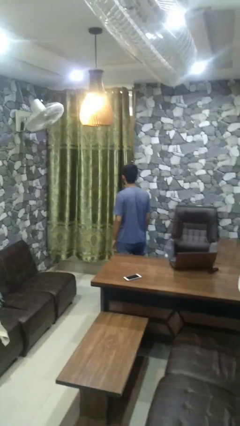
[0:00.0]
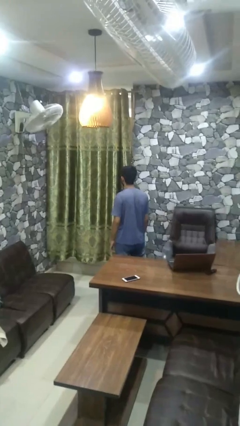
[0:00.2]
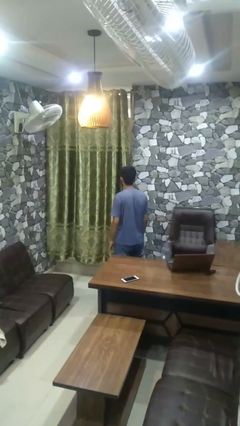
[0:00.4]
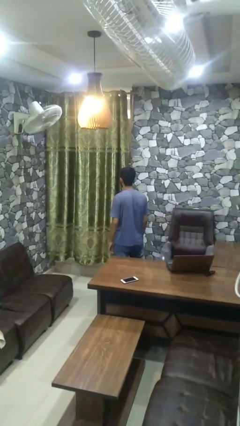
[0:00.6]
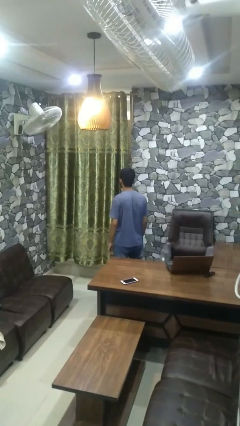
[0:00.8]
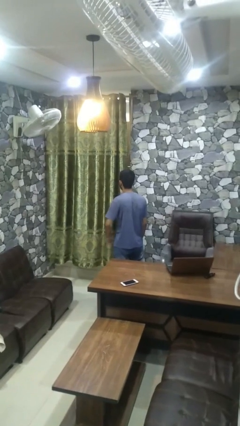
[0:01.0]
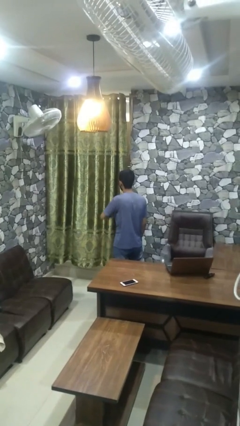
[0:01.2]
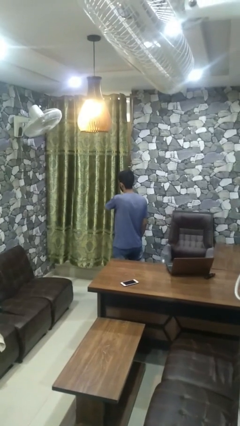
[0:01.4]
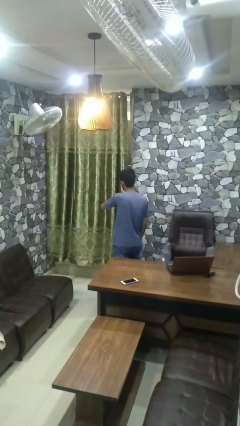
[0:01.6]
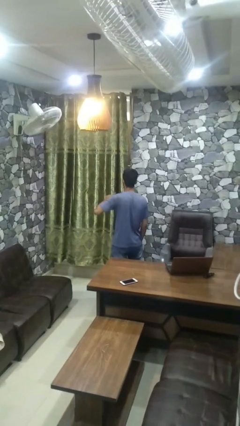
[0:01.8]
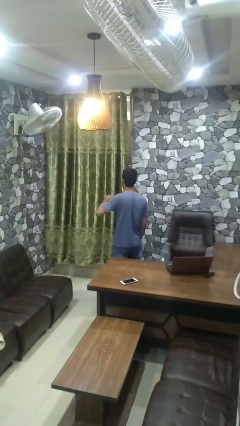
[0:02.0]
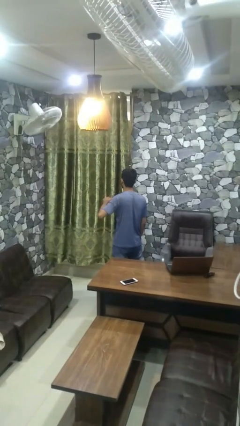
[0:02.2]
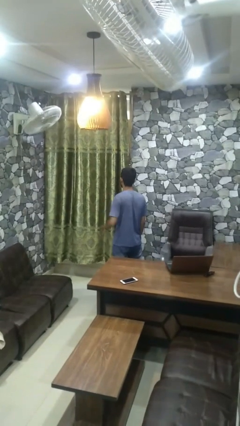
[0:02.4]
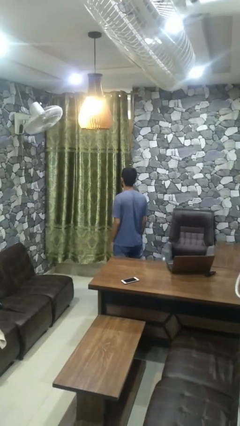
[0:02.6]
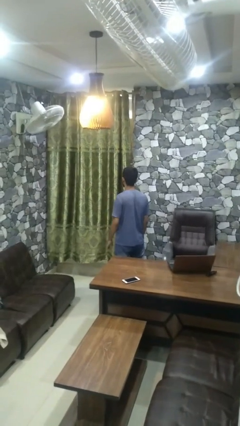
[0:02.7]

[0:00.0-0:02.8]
person gestures cut

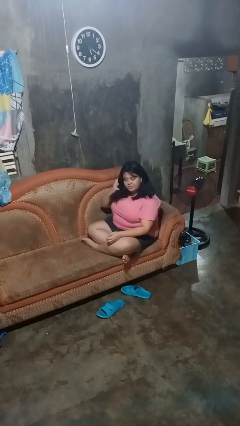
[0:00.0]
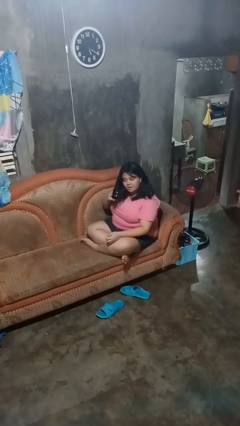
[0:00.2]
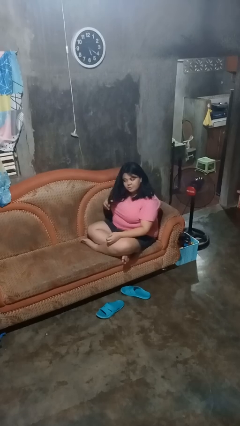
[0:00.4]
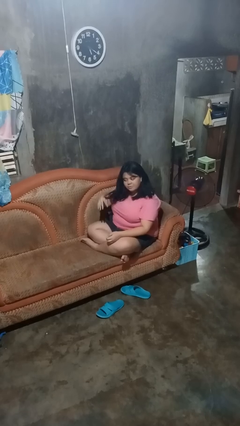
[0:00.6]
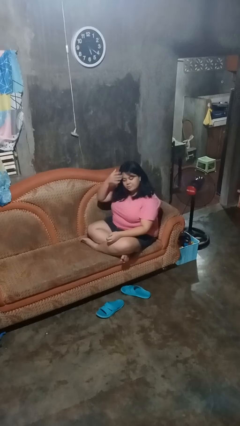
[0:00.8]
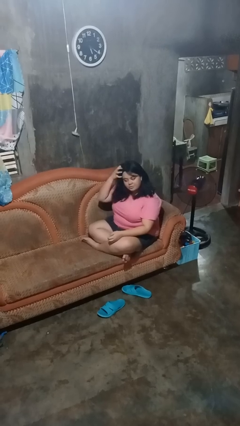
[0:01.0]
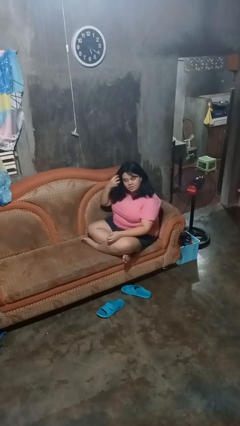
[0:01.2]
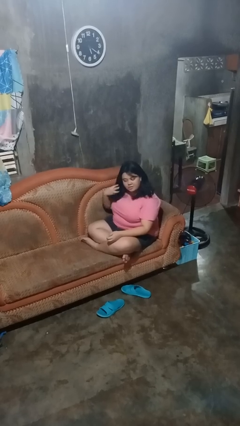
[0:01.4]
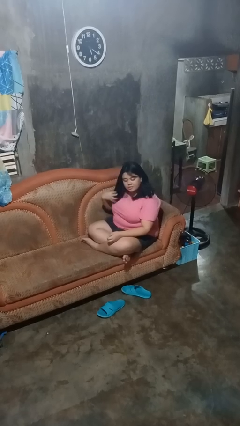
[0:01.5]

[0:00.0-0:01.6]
person strokes hair

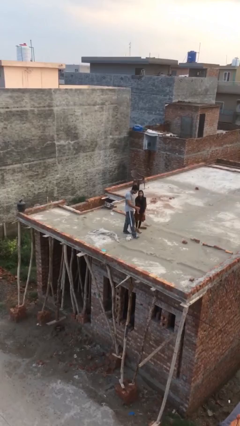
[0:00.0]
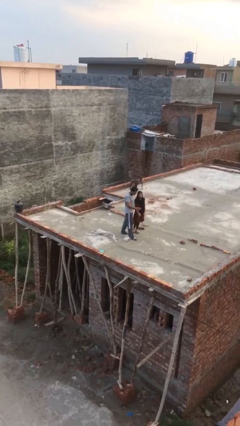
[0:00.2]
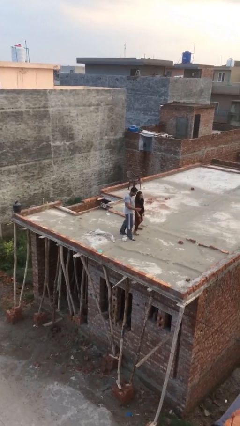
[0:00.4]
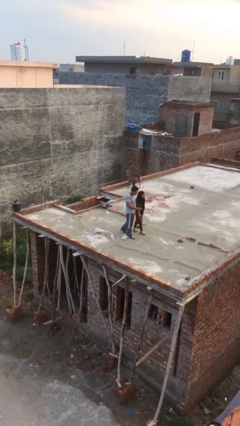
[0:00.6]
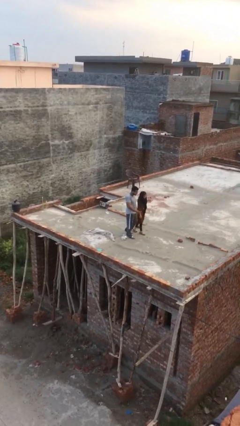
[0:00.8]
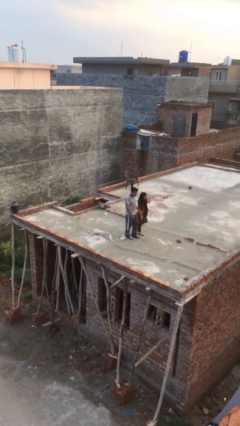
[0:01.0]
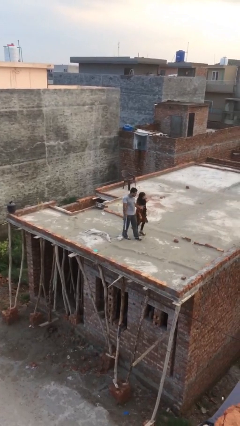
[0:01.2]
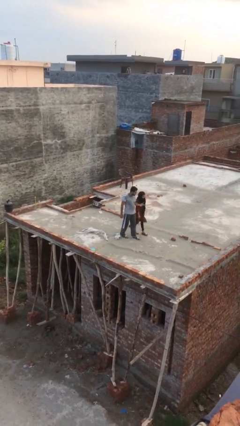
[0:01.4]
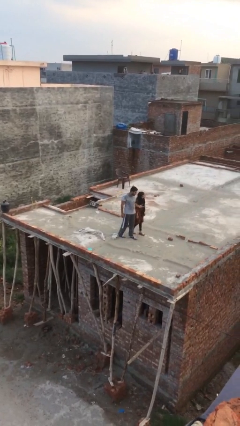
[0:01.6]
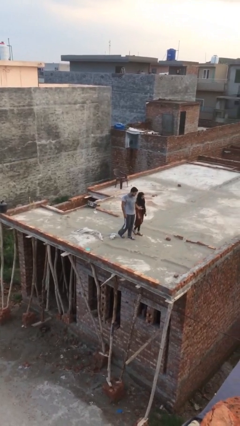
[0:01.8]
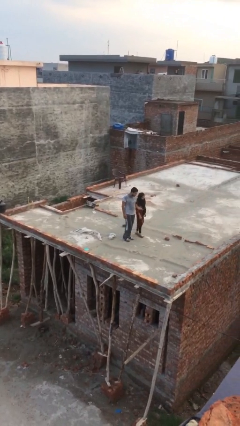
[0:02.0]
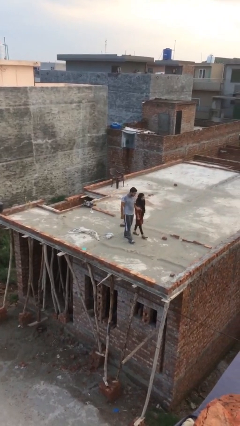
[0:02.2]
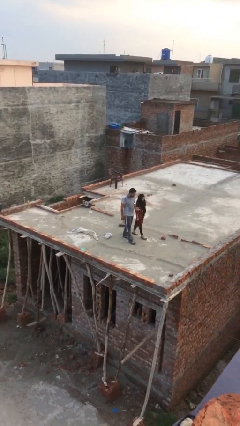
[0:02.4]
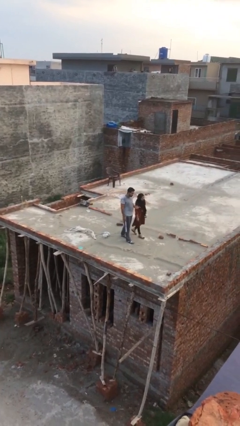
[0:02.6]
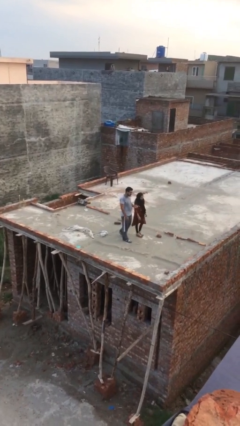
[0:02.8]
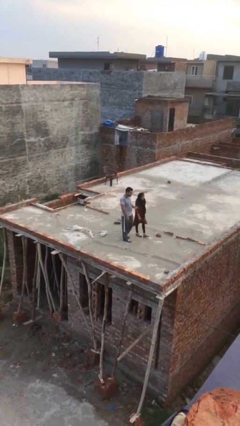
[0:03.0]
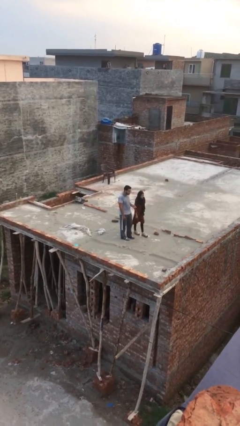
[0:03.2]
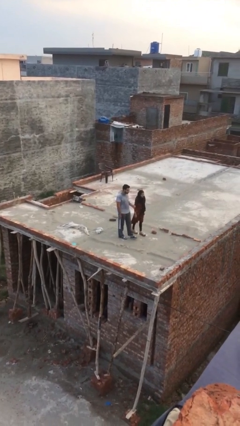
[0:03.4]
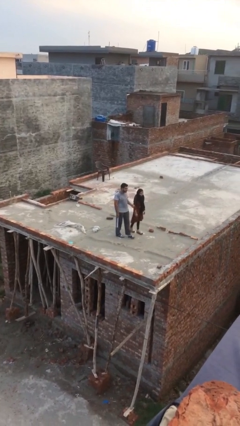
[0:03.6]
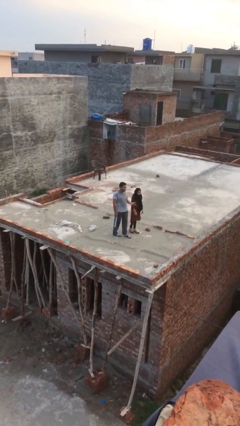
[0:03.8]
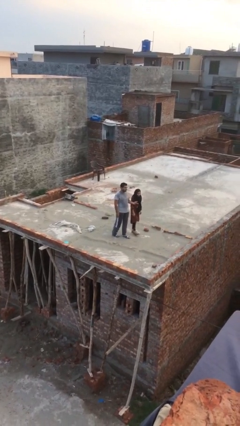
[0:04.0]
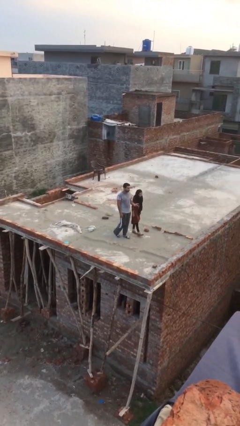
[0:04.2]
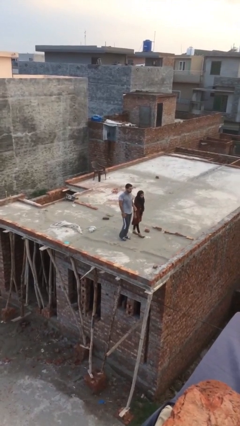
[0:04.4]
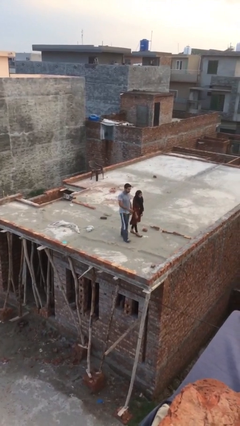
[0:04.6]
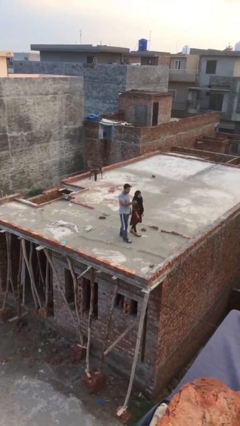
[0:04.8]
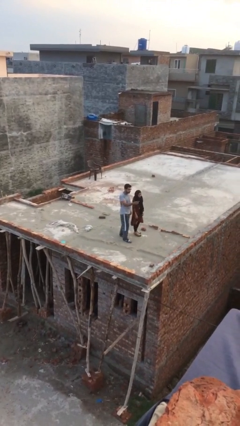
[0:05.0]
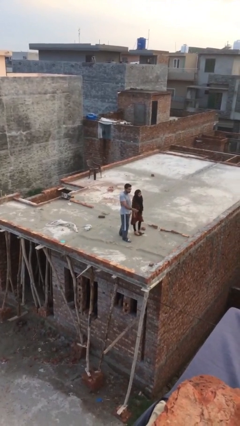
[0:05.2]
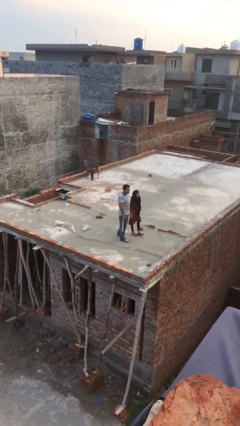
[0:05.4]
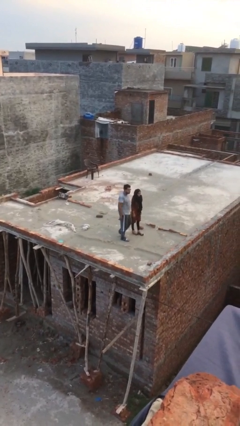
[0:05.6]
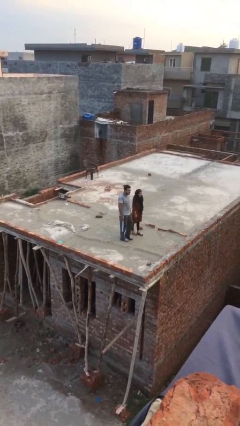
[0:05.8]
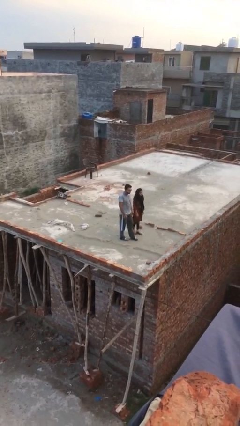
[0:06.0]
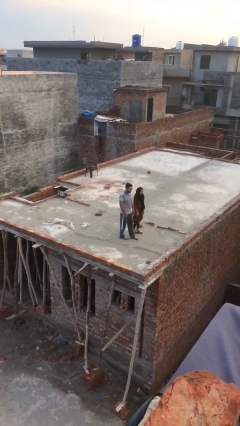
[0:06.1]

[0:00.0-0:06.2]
person talks to person

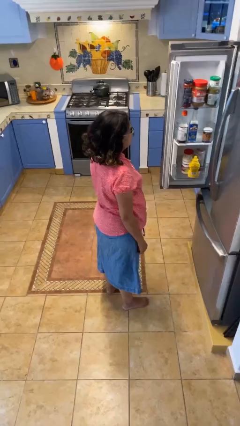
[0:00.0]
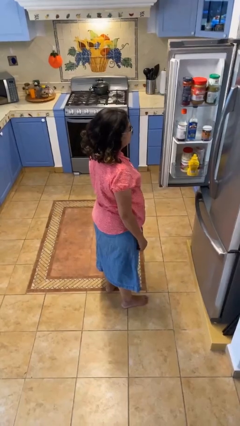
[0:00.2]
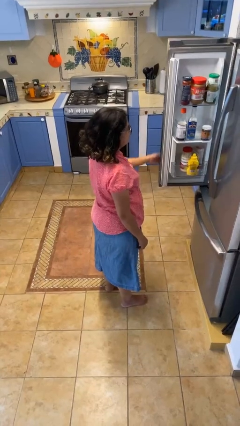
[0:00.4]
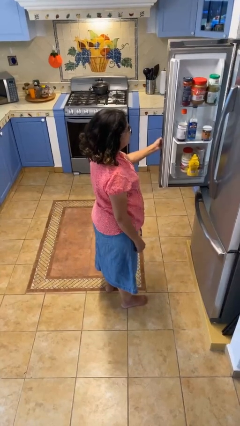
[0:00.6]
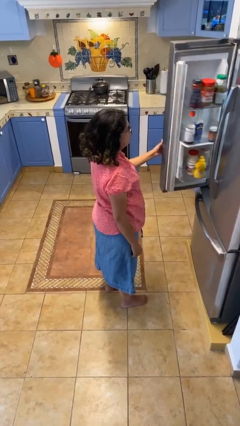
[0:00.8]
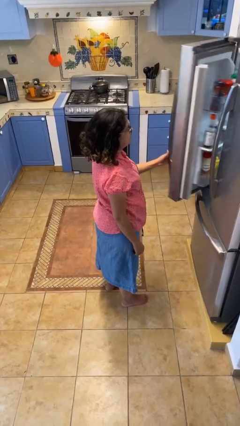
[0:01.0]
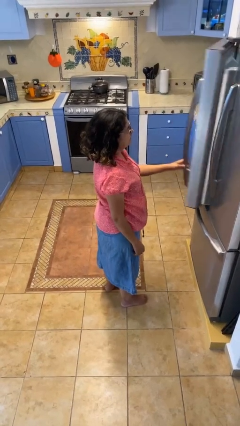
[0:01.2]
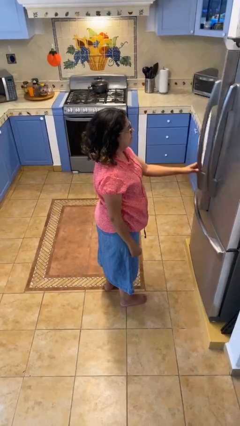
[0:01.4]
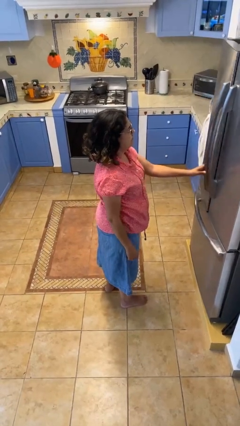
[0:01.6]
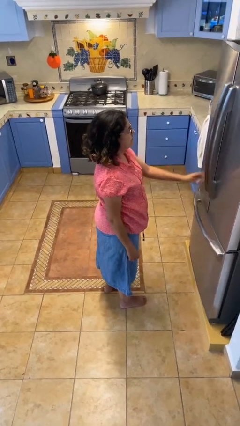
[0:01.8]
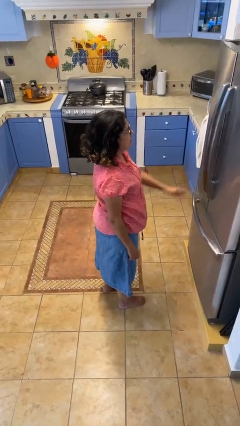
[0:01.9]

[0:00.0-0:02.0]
person closes refrigerator

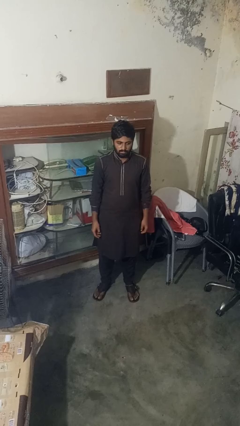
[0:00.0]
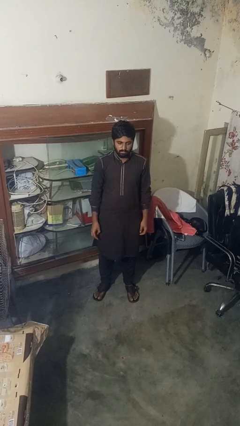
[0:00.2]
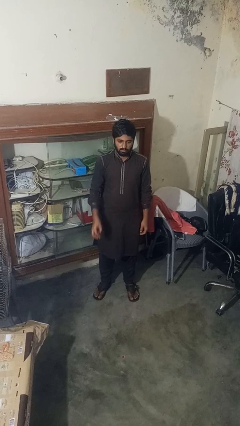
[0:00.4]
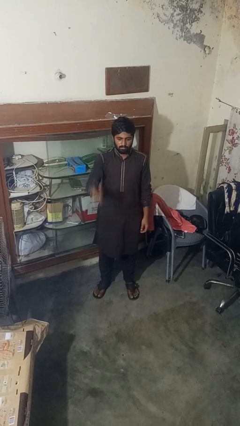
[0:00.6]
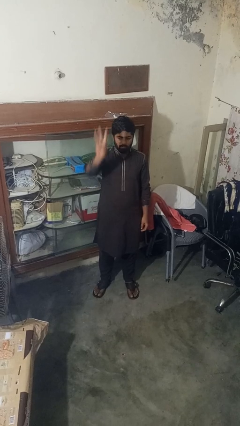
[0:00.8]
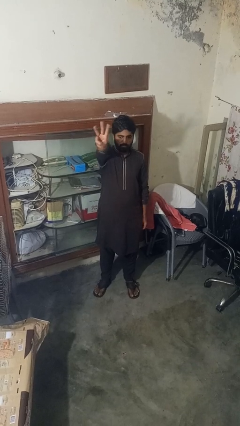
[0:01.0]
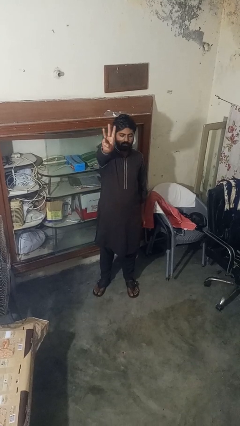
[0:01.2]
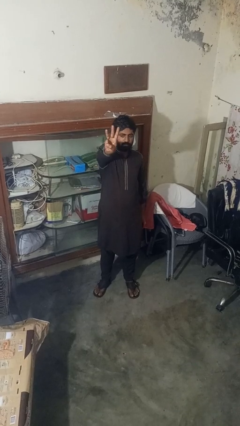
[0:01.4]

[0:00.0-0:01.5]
person gestures number three

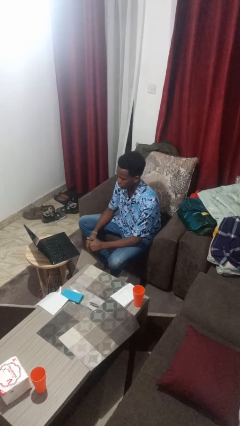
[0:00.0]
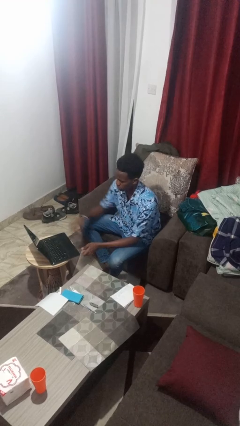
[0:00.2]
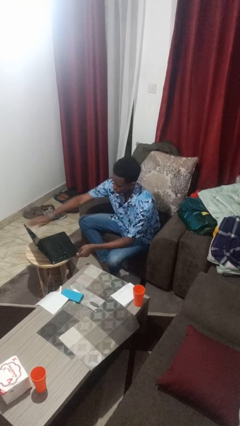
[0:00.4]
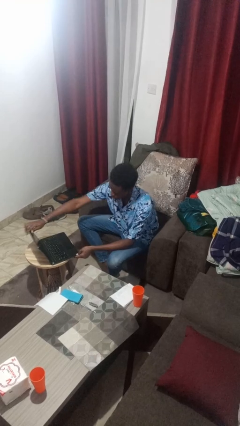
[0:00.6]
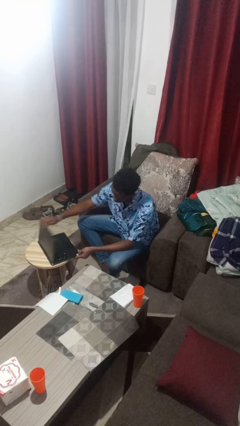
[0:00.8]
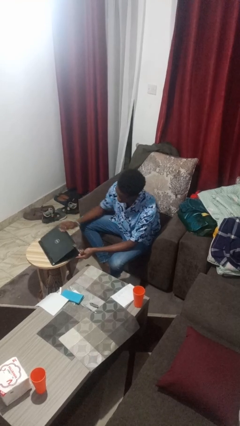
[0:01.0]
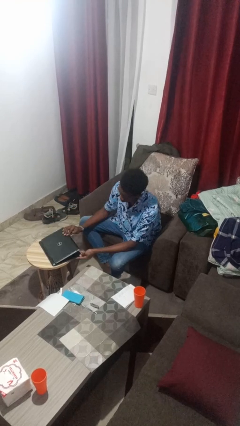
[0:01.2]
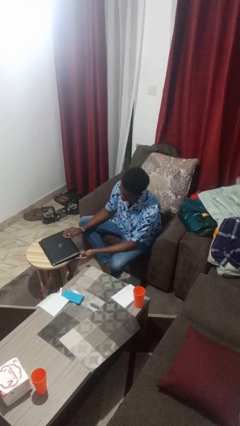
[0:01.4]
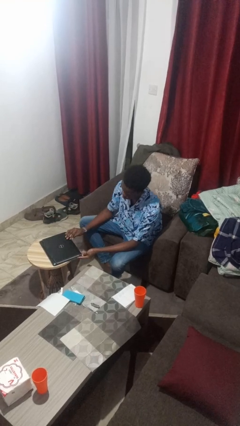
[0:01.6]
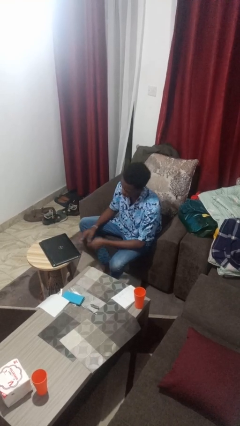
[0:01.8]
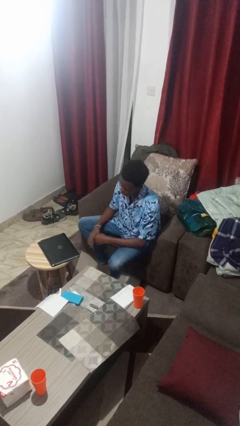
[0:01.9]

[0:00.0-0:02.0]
person closes laptop

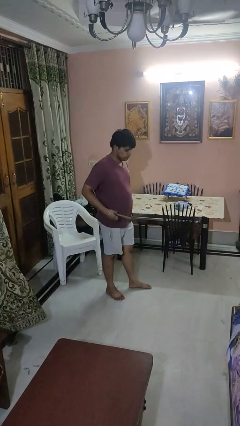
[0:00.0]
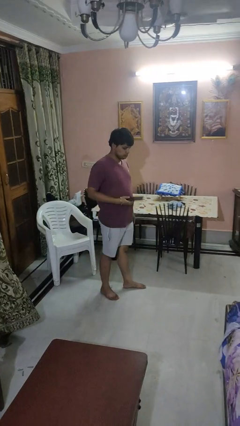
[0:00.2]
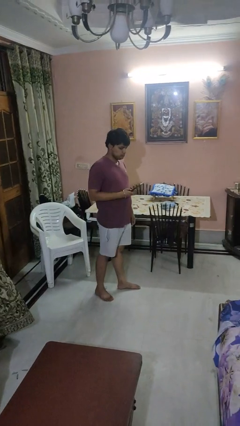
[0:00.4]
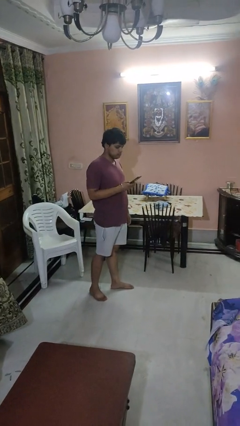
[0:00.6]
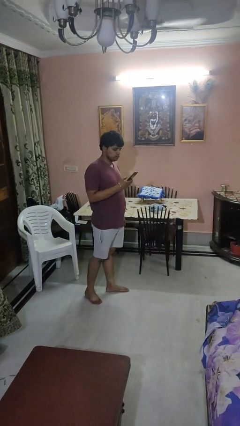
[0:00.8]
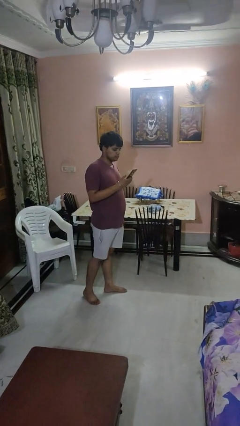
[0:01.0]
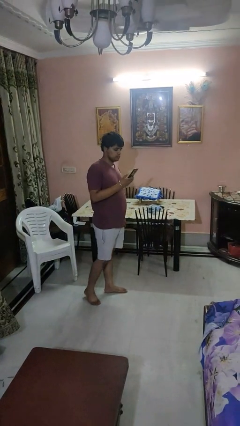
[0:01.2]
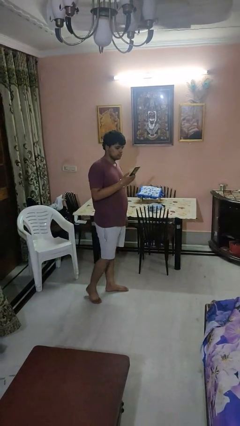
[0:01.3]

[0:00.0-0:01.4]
person takes phone from pocket

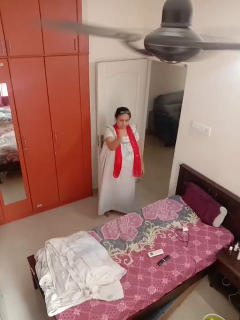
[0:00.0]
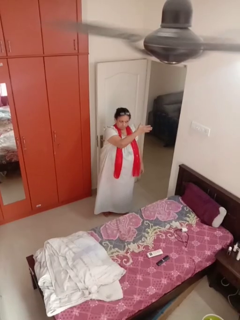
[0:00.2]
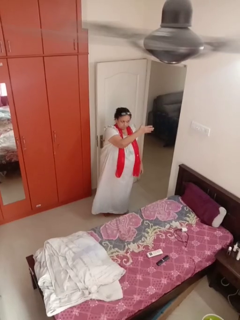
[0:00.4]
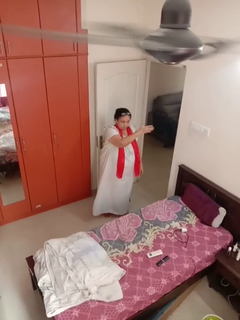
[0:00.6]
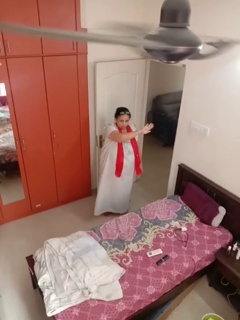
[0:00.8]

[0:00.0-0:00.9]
person gestures swipe left
